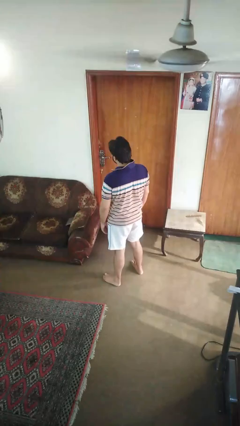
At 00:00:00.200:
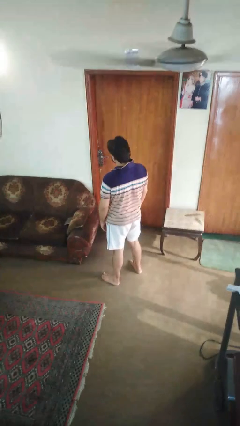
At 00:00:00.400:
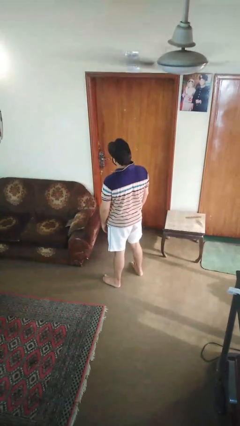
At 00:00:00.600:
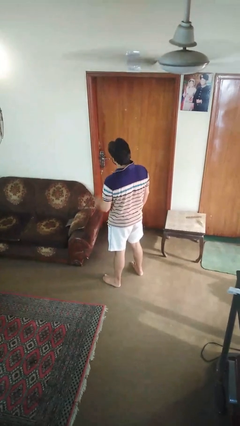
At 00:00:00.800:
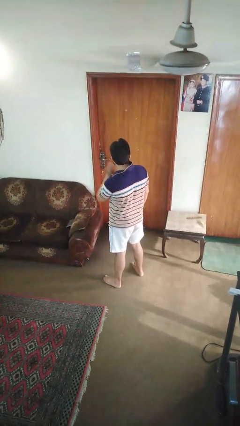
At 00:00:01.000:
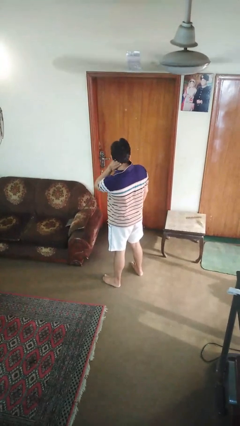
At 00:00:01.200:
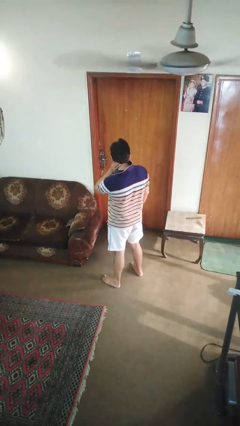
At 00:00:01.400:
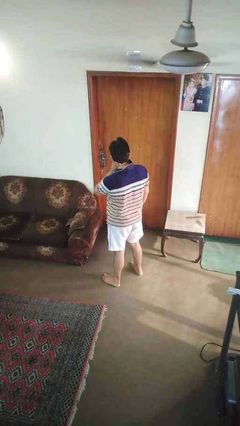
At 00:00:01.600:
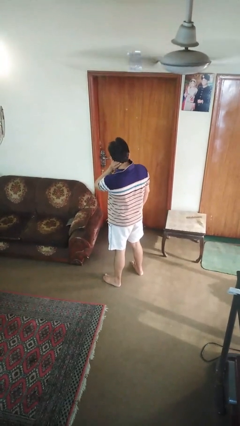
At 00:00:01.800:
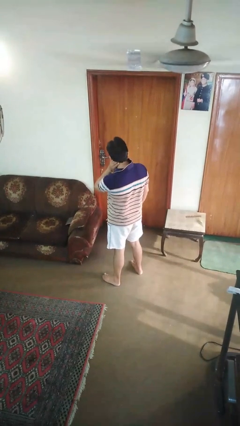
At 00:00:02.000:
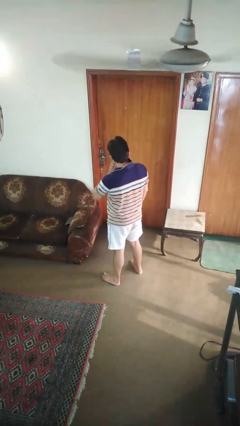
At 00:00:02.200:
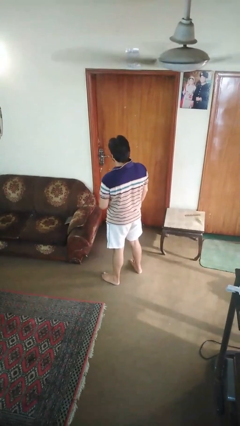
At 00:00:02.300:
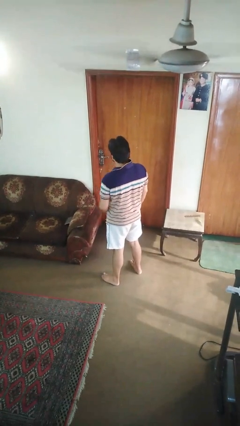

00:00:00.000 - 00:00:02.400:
person rubs neck

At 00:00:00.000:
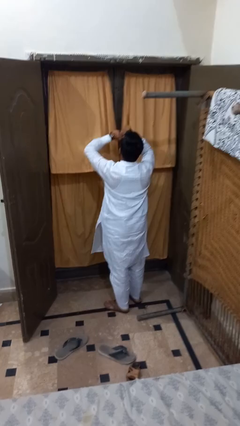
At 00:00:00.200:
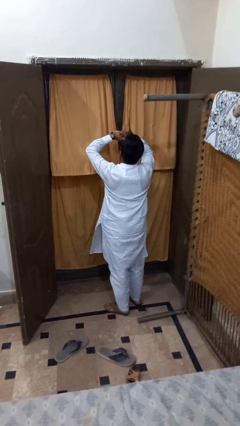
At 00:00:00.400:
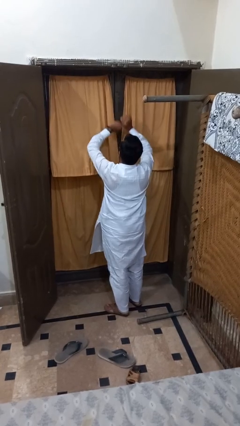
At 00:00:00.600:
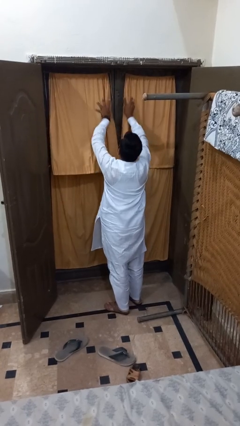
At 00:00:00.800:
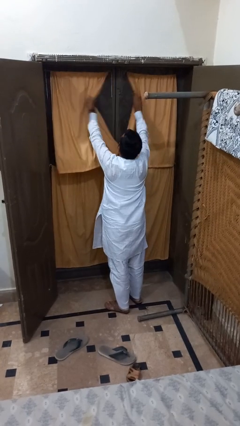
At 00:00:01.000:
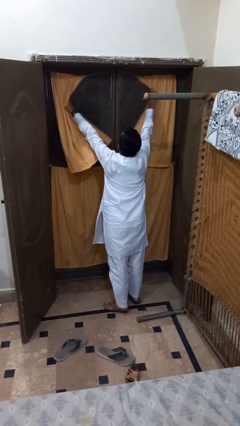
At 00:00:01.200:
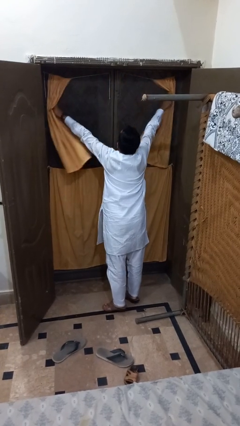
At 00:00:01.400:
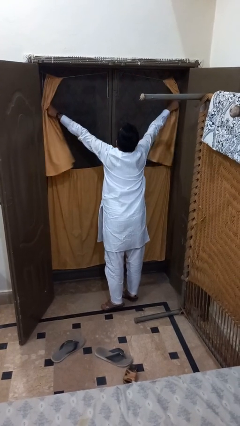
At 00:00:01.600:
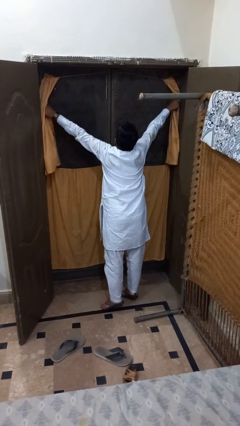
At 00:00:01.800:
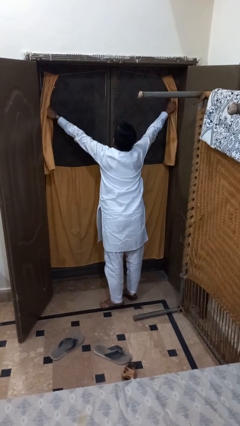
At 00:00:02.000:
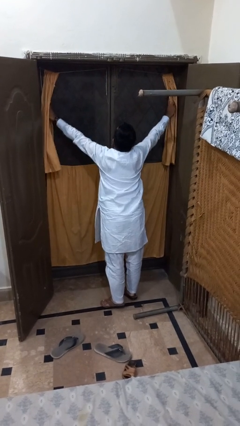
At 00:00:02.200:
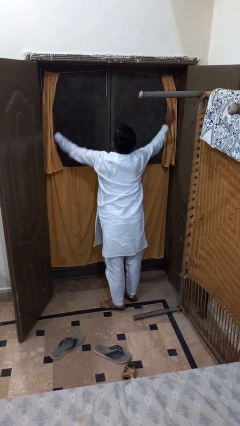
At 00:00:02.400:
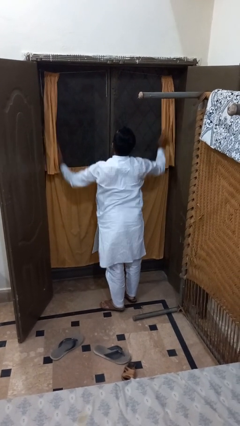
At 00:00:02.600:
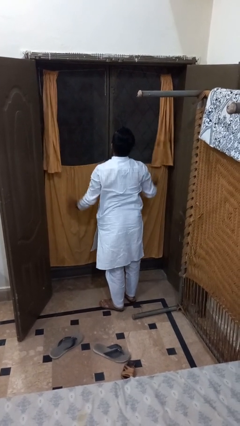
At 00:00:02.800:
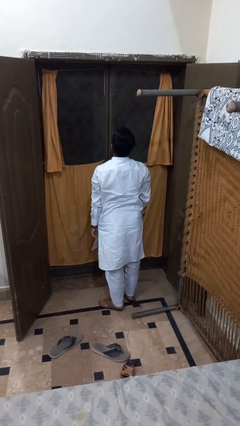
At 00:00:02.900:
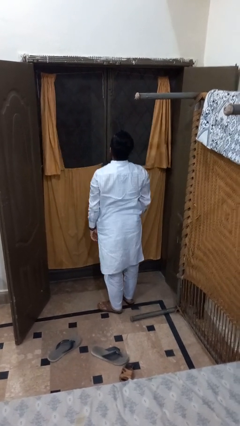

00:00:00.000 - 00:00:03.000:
person opens curtains

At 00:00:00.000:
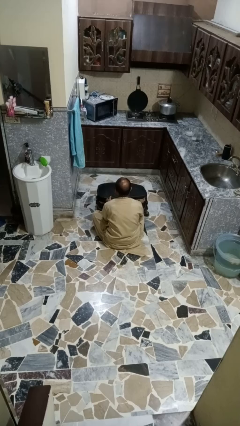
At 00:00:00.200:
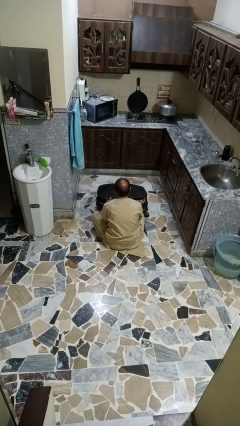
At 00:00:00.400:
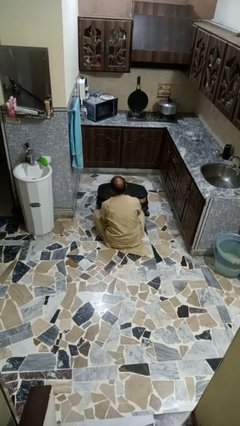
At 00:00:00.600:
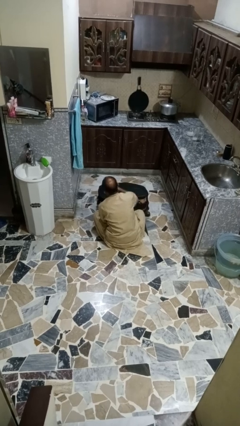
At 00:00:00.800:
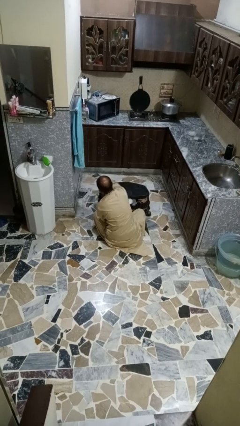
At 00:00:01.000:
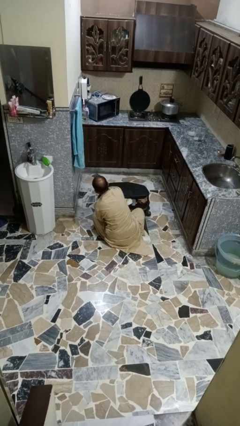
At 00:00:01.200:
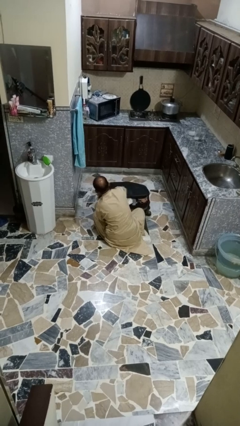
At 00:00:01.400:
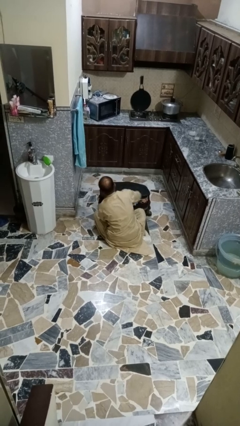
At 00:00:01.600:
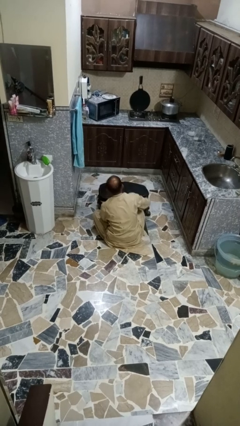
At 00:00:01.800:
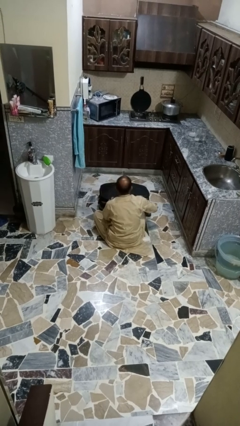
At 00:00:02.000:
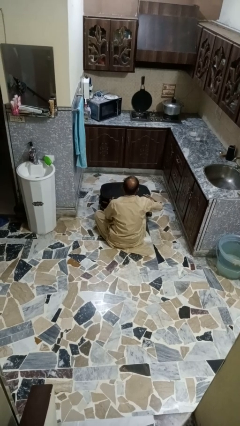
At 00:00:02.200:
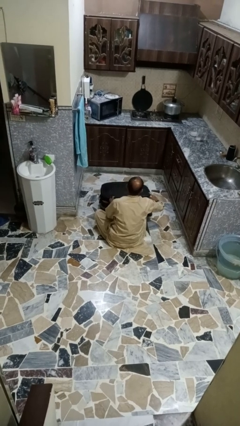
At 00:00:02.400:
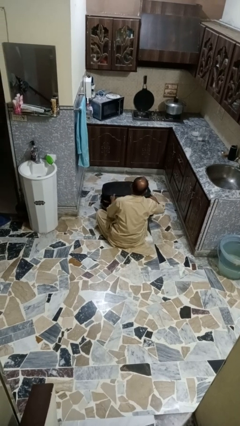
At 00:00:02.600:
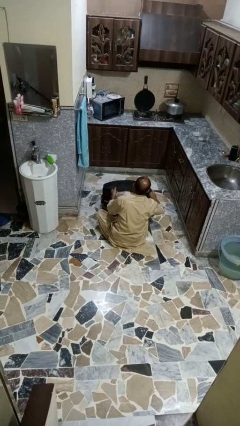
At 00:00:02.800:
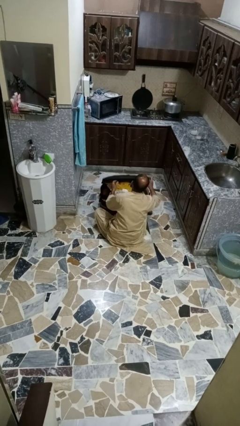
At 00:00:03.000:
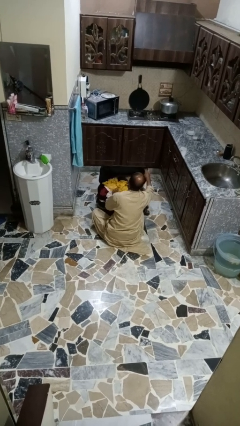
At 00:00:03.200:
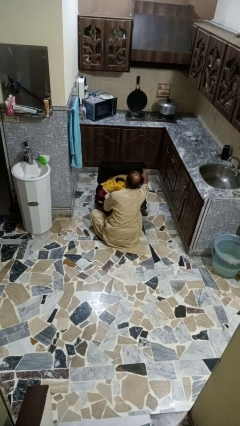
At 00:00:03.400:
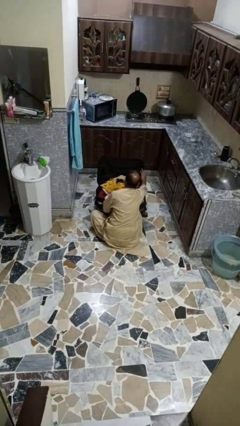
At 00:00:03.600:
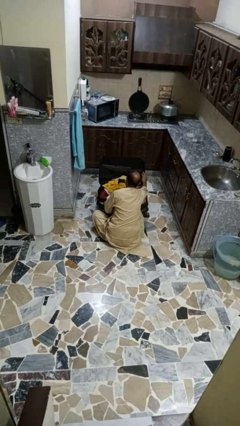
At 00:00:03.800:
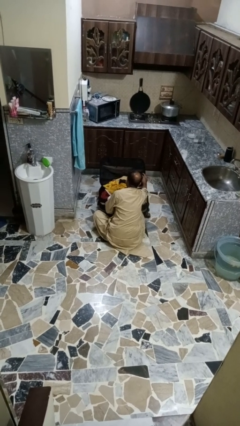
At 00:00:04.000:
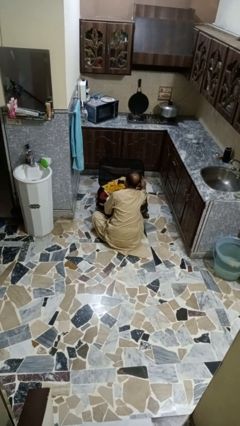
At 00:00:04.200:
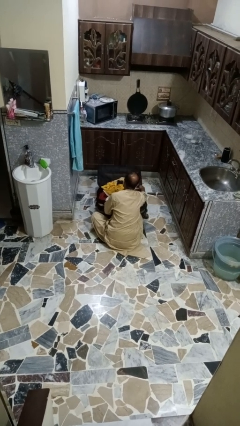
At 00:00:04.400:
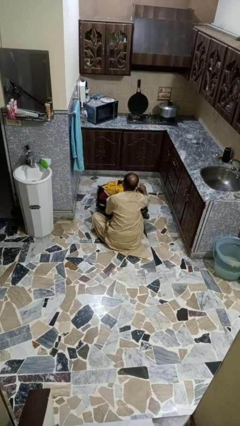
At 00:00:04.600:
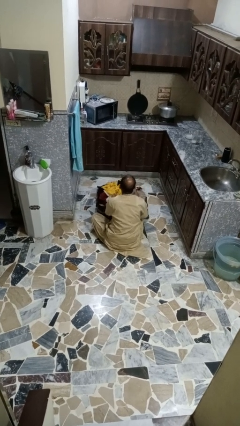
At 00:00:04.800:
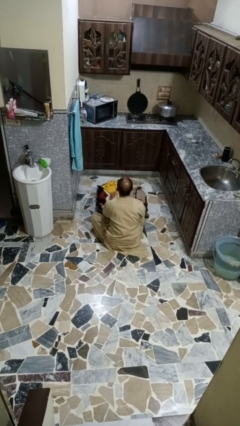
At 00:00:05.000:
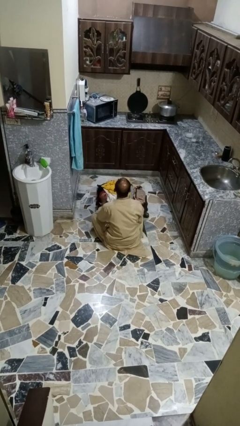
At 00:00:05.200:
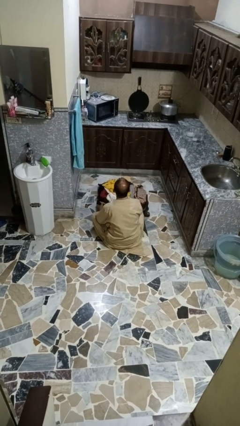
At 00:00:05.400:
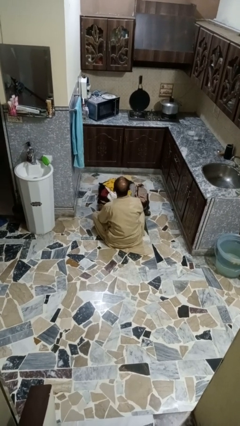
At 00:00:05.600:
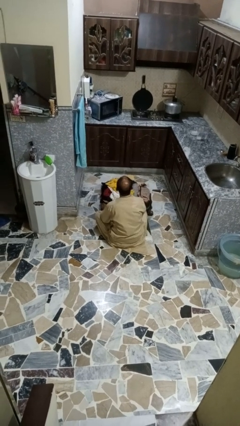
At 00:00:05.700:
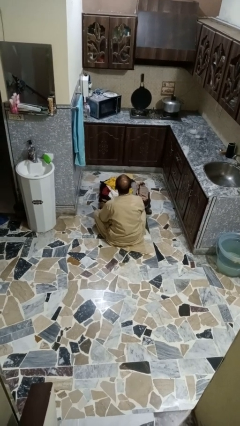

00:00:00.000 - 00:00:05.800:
person opens suitcase

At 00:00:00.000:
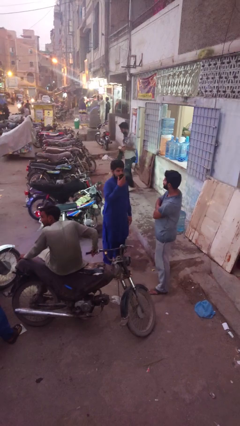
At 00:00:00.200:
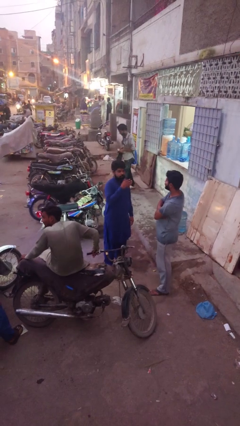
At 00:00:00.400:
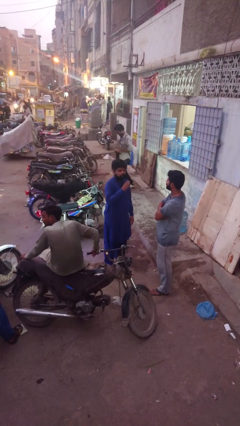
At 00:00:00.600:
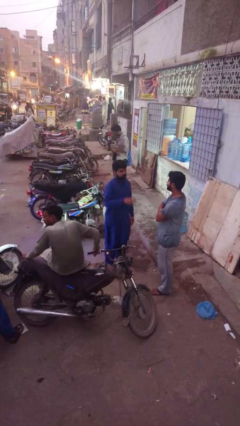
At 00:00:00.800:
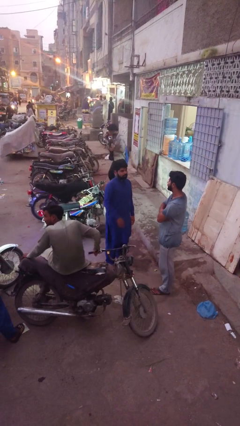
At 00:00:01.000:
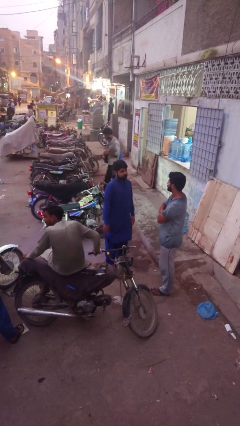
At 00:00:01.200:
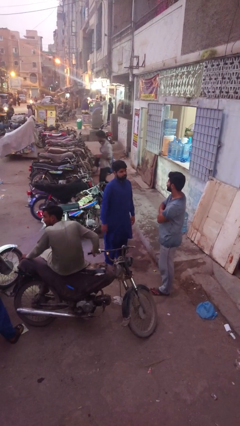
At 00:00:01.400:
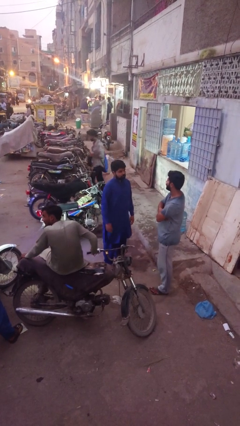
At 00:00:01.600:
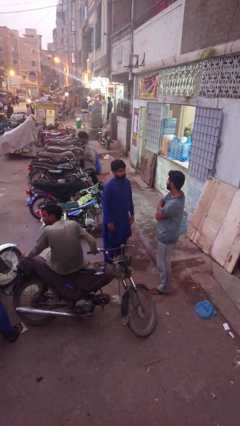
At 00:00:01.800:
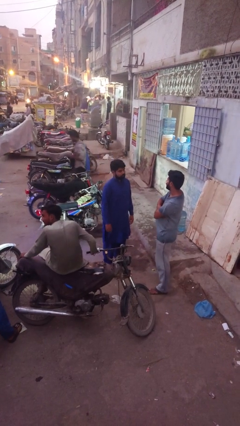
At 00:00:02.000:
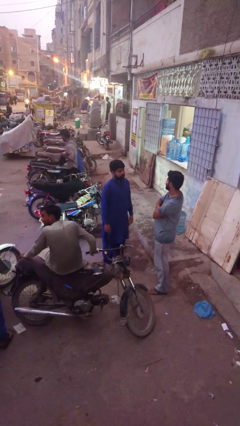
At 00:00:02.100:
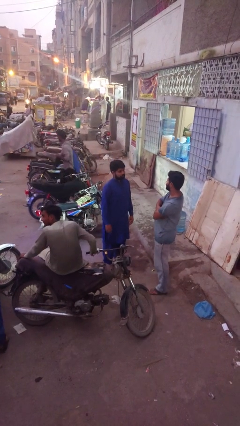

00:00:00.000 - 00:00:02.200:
person talks to person

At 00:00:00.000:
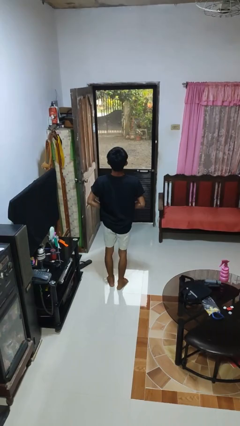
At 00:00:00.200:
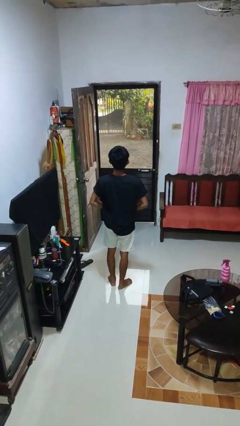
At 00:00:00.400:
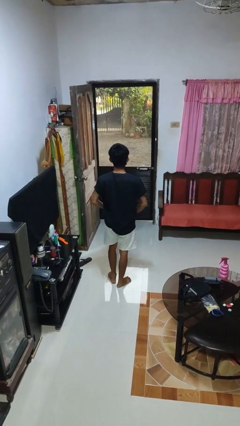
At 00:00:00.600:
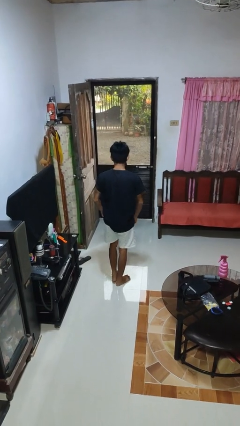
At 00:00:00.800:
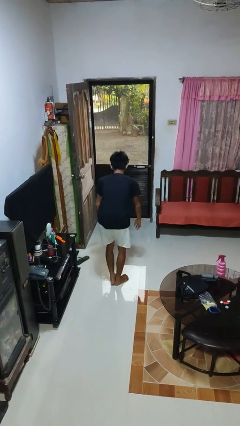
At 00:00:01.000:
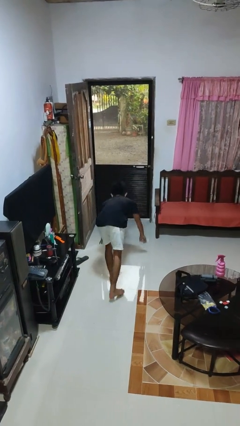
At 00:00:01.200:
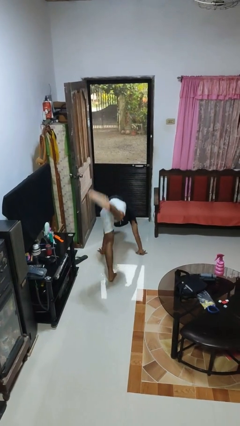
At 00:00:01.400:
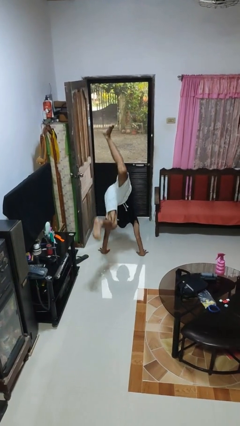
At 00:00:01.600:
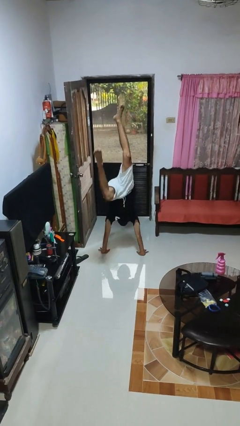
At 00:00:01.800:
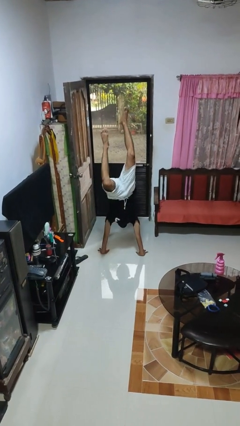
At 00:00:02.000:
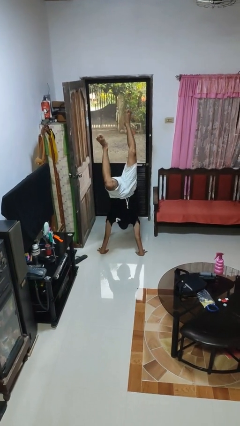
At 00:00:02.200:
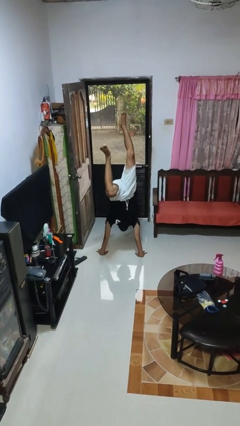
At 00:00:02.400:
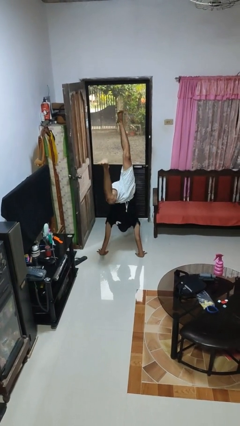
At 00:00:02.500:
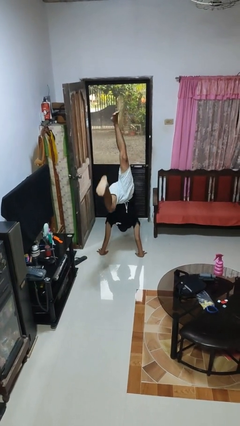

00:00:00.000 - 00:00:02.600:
person handstand

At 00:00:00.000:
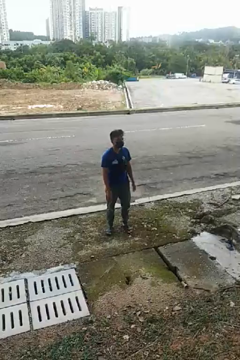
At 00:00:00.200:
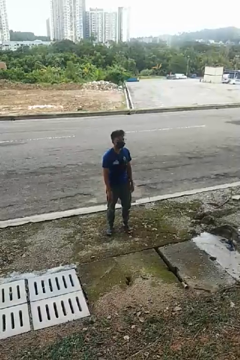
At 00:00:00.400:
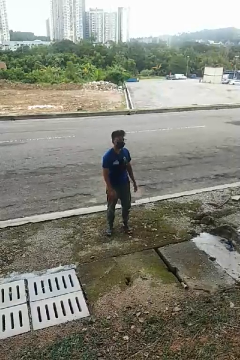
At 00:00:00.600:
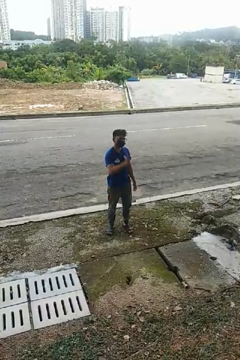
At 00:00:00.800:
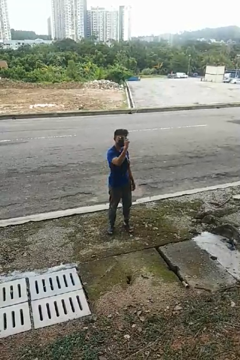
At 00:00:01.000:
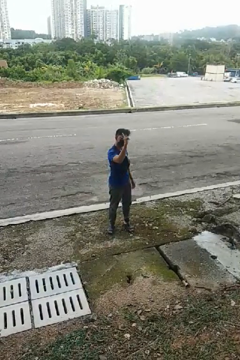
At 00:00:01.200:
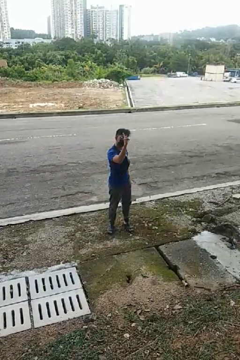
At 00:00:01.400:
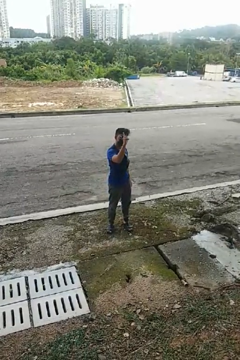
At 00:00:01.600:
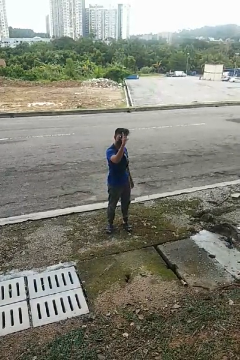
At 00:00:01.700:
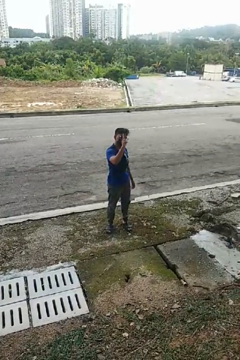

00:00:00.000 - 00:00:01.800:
person gestures number one
